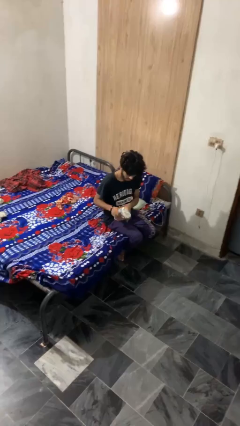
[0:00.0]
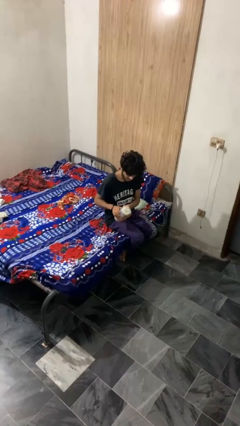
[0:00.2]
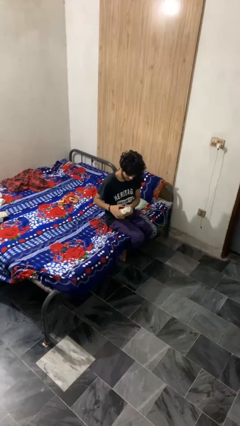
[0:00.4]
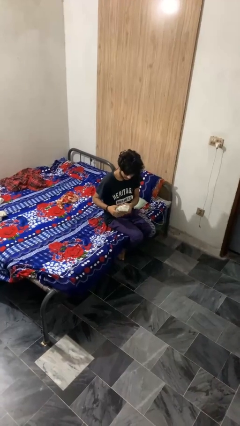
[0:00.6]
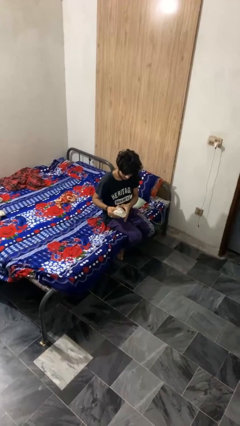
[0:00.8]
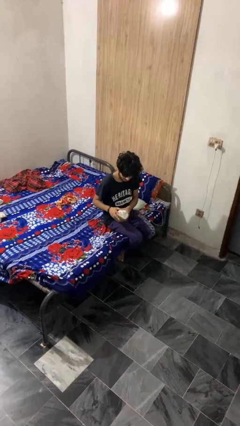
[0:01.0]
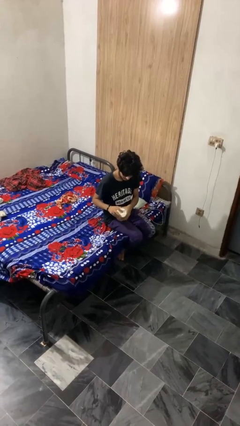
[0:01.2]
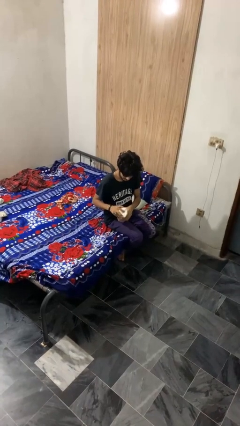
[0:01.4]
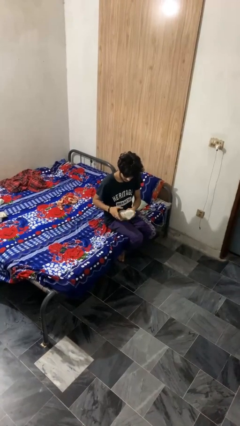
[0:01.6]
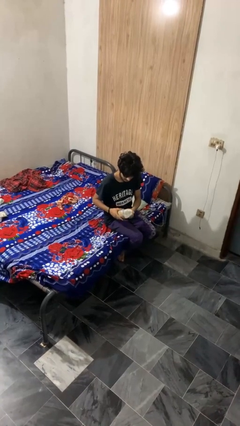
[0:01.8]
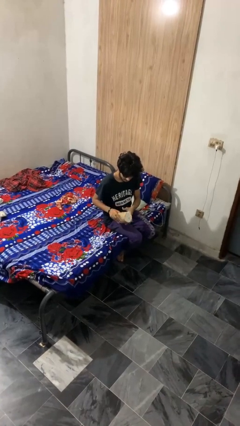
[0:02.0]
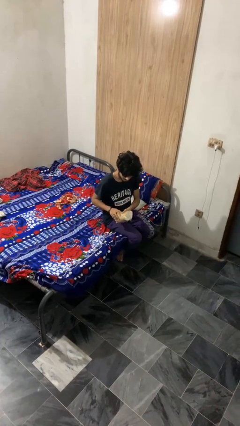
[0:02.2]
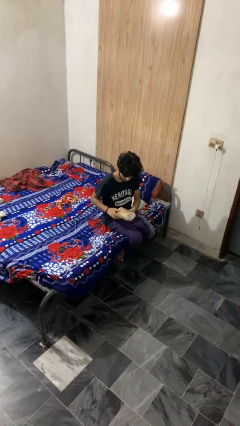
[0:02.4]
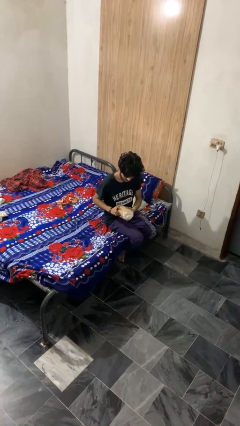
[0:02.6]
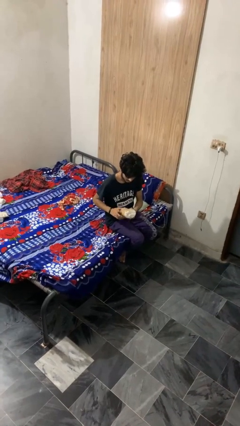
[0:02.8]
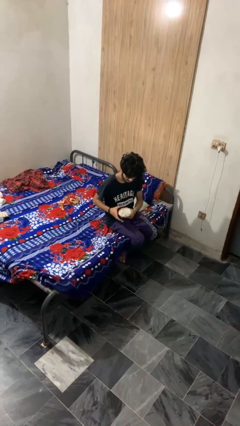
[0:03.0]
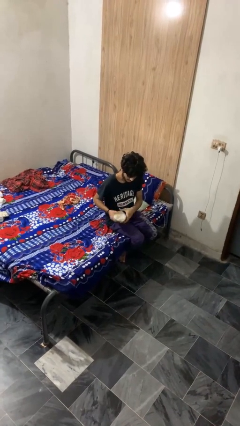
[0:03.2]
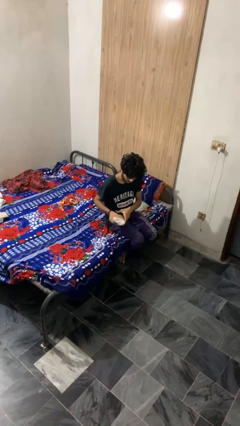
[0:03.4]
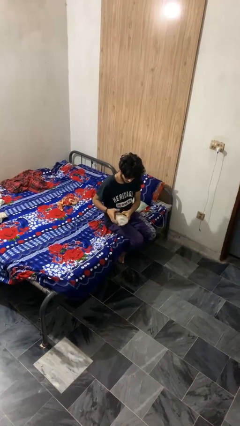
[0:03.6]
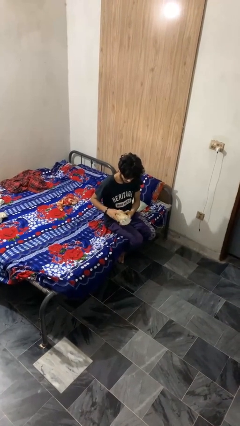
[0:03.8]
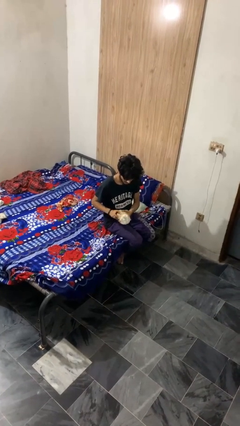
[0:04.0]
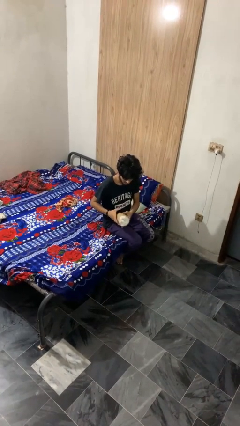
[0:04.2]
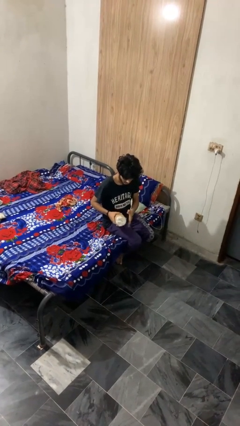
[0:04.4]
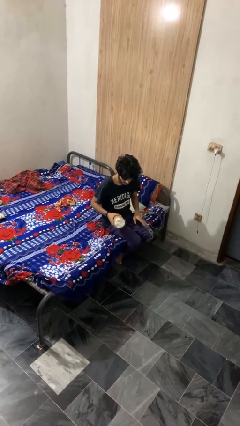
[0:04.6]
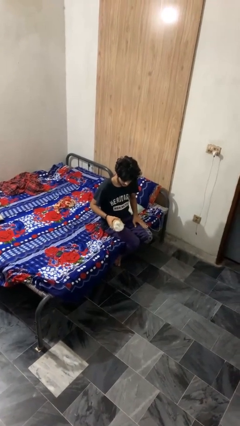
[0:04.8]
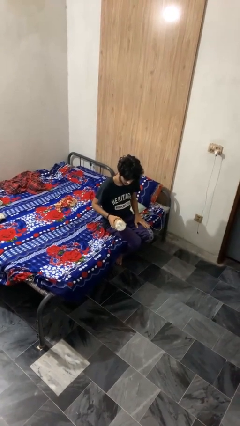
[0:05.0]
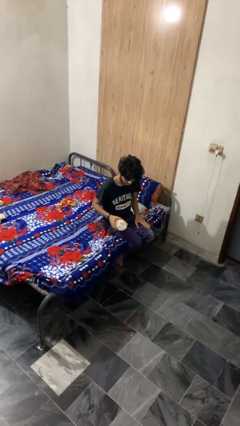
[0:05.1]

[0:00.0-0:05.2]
person squeezes object

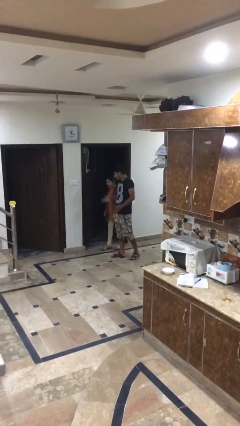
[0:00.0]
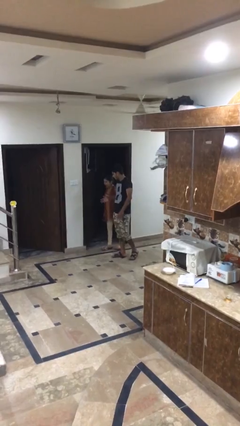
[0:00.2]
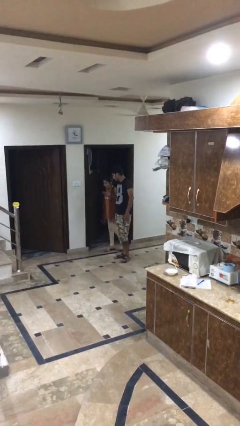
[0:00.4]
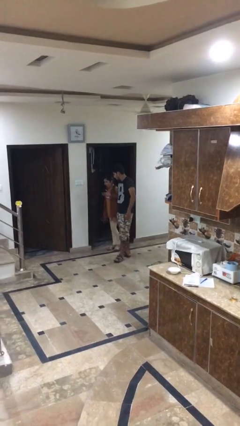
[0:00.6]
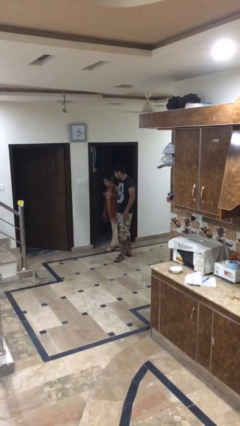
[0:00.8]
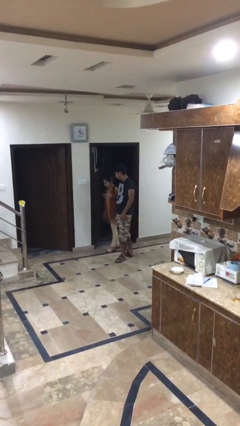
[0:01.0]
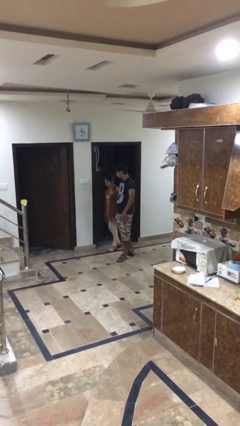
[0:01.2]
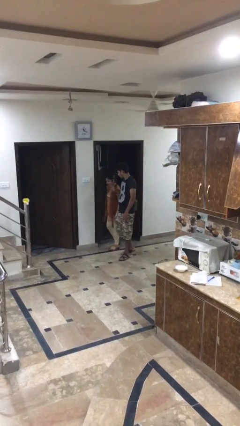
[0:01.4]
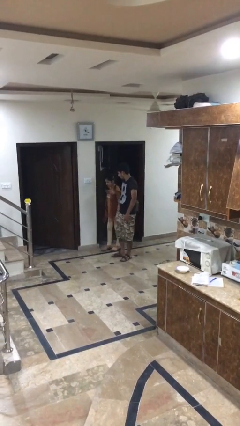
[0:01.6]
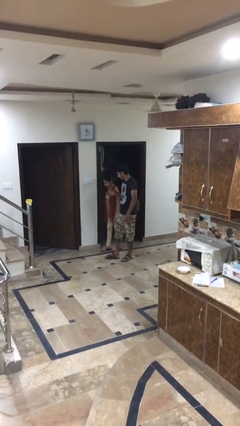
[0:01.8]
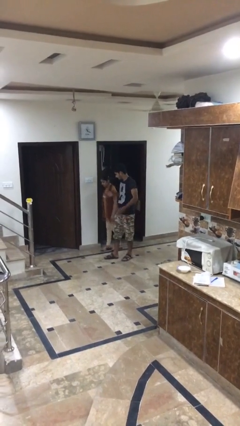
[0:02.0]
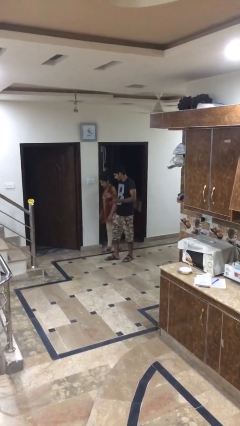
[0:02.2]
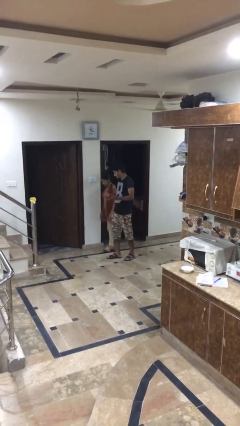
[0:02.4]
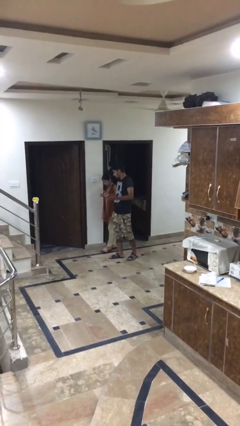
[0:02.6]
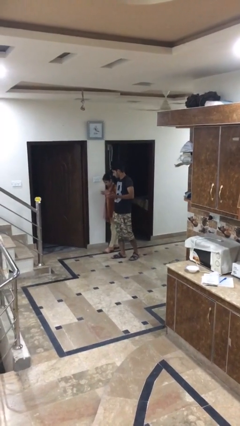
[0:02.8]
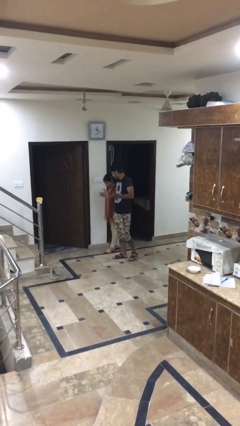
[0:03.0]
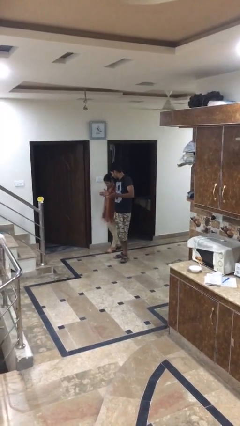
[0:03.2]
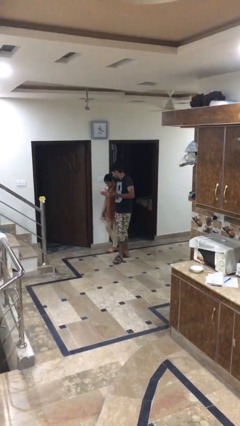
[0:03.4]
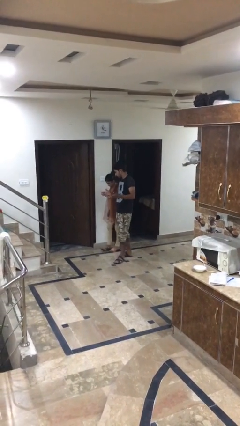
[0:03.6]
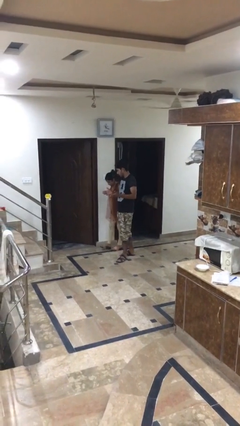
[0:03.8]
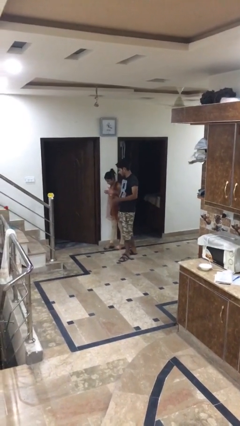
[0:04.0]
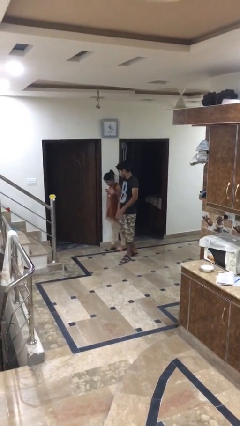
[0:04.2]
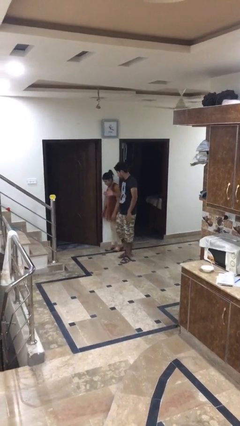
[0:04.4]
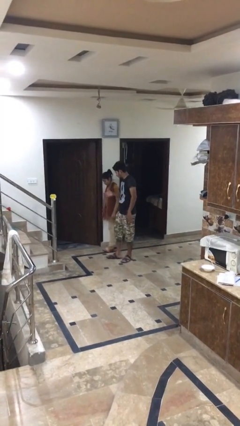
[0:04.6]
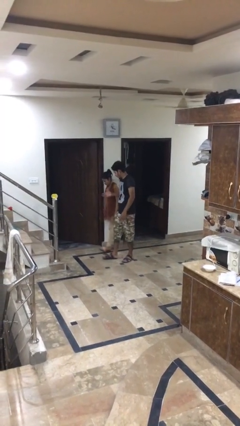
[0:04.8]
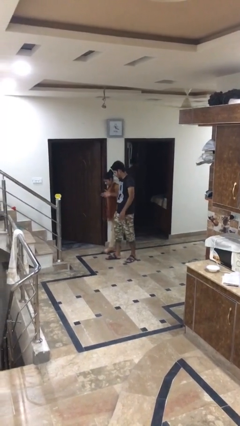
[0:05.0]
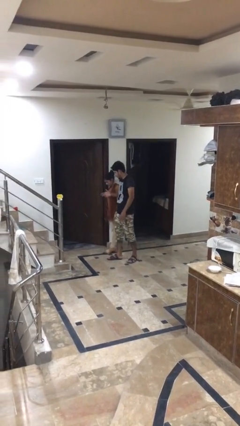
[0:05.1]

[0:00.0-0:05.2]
person talks to person

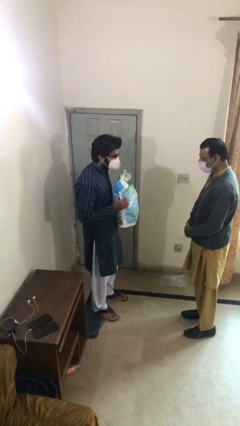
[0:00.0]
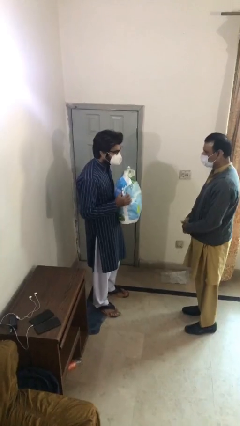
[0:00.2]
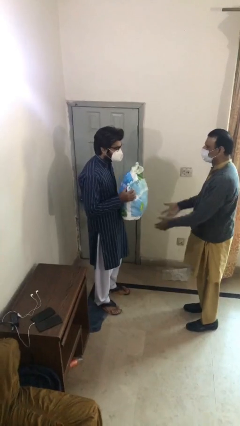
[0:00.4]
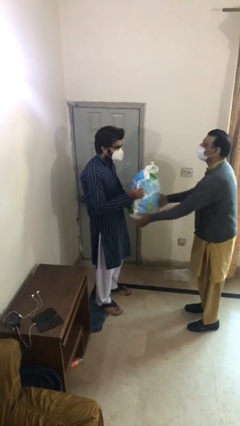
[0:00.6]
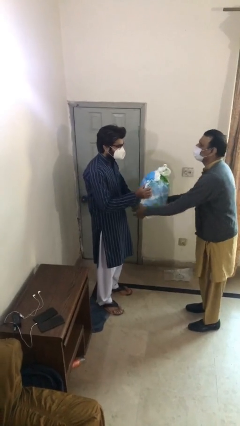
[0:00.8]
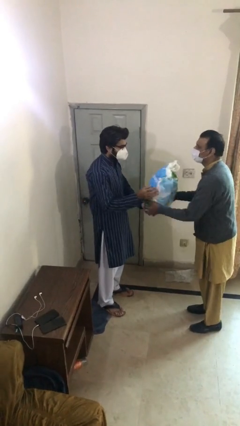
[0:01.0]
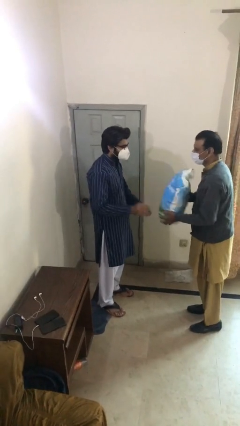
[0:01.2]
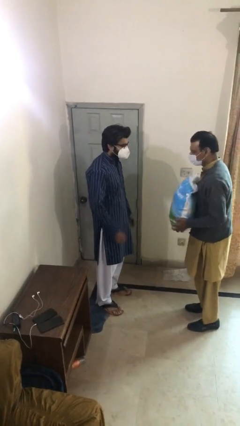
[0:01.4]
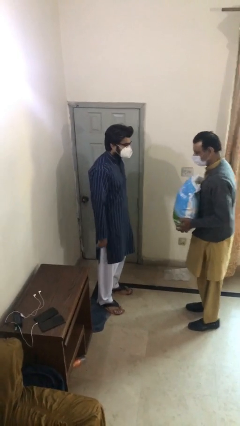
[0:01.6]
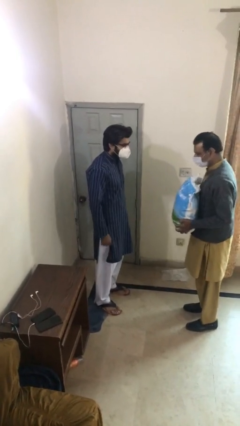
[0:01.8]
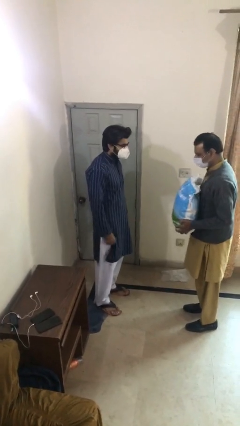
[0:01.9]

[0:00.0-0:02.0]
person transfers object to person

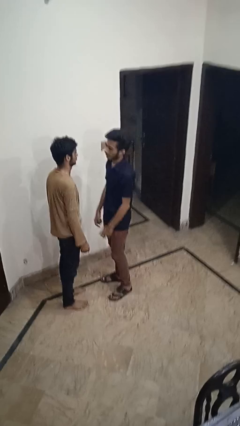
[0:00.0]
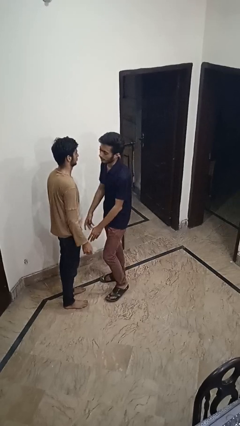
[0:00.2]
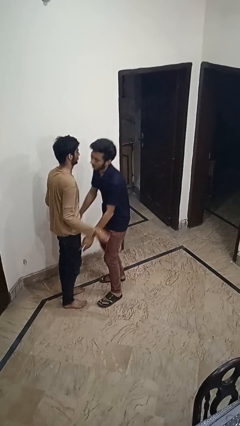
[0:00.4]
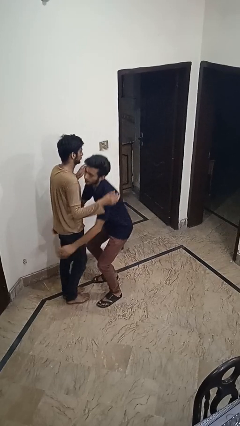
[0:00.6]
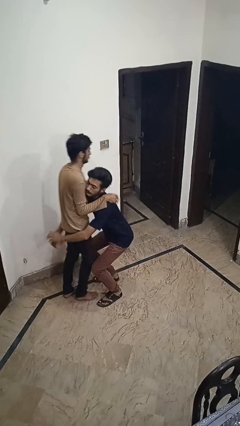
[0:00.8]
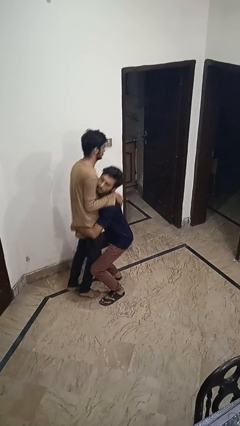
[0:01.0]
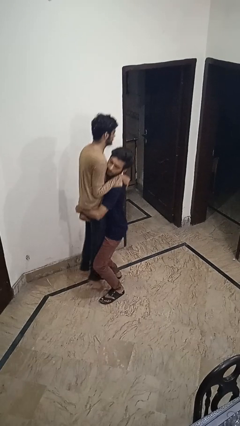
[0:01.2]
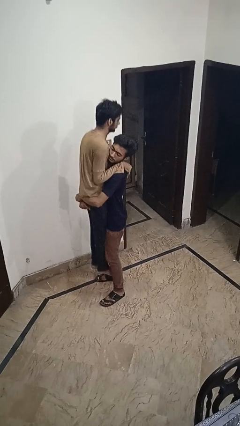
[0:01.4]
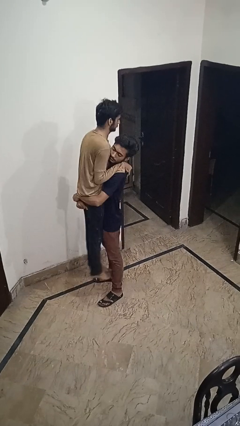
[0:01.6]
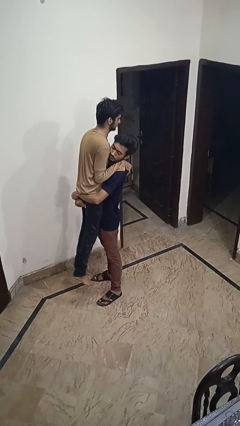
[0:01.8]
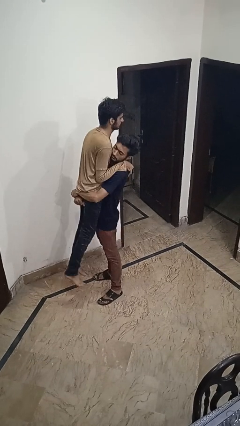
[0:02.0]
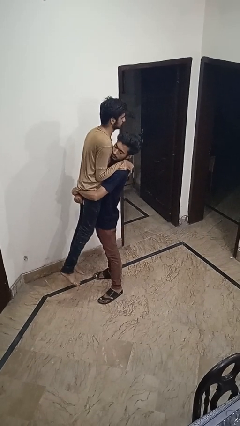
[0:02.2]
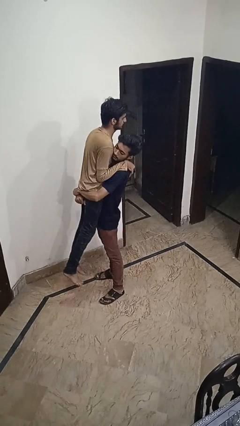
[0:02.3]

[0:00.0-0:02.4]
person picks up person

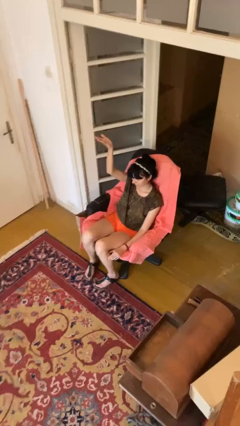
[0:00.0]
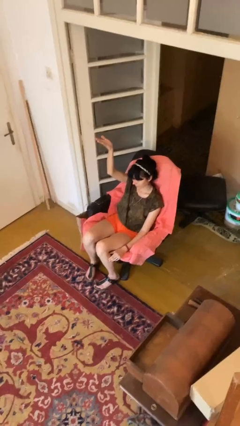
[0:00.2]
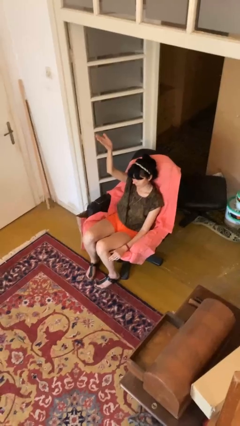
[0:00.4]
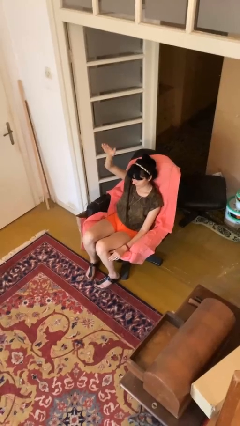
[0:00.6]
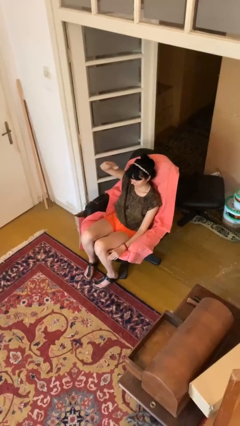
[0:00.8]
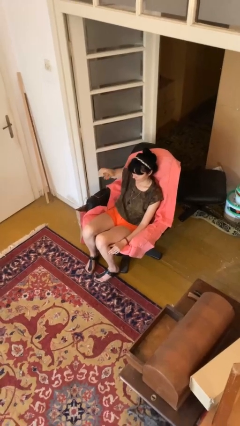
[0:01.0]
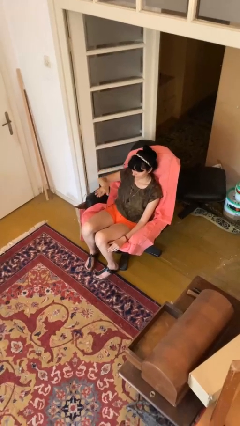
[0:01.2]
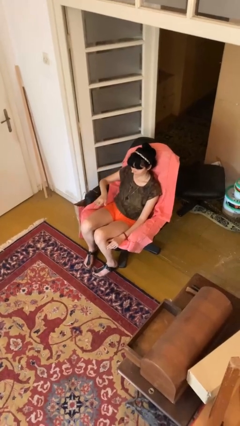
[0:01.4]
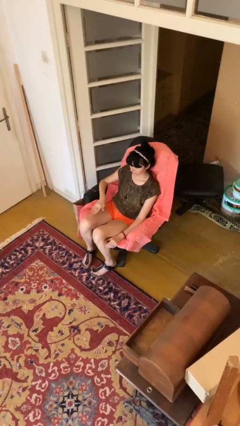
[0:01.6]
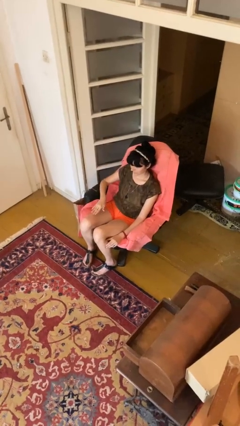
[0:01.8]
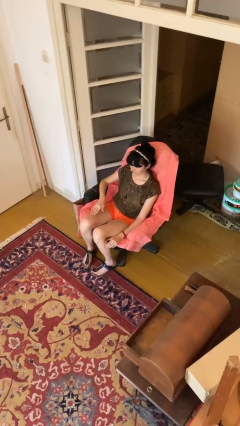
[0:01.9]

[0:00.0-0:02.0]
person gestures swipe down

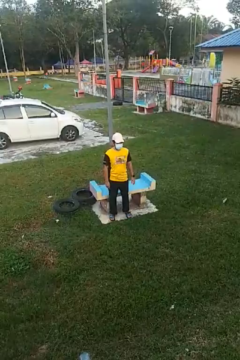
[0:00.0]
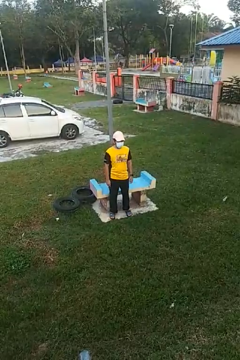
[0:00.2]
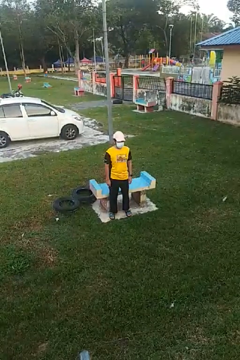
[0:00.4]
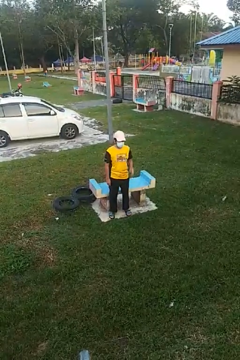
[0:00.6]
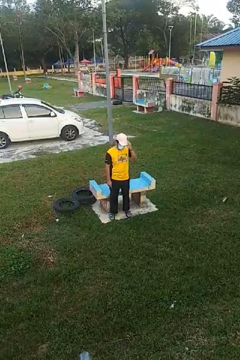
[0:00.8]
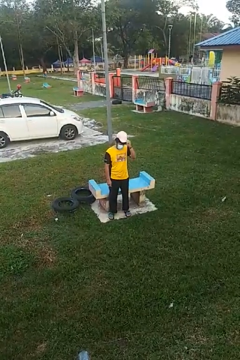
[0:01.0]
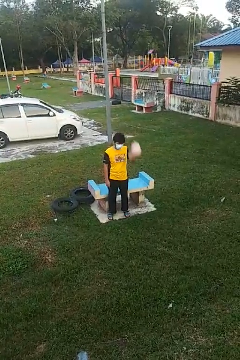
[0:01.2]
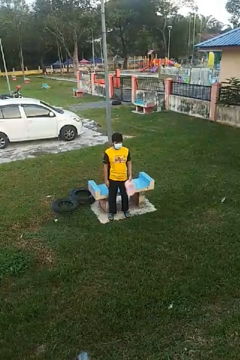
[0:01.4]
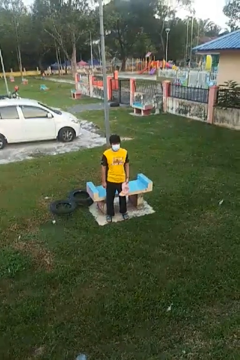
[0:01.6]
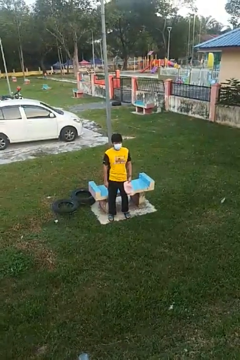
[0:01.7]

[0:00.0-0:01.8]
person takes off hat
